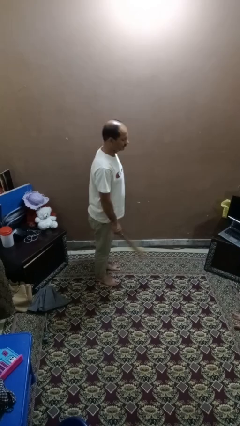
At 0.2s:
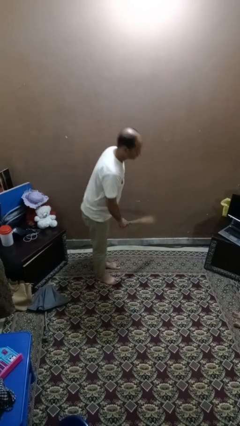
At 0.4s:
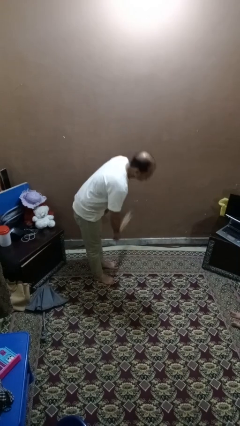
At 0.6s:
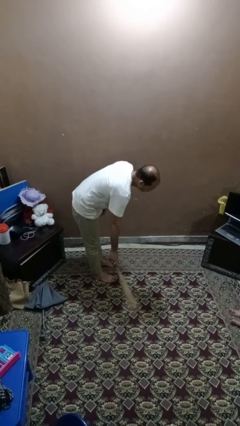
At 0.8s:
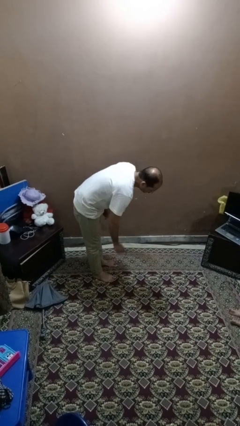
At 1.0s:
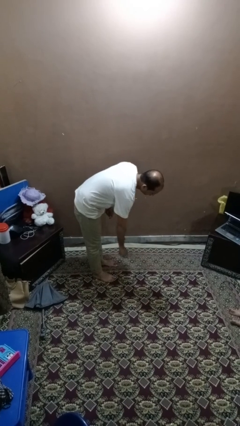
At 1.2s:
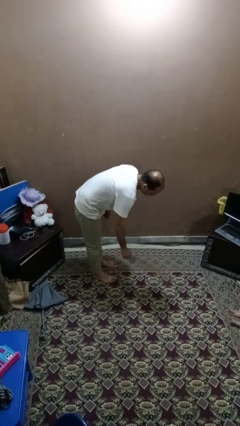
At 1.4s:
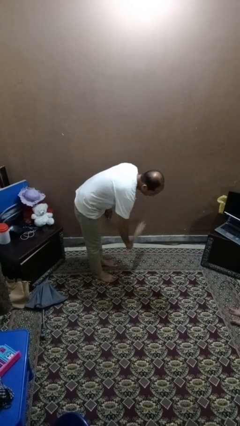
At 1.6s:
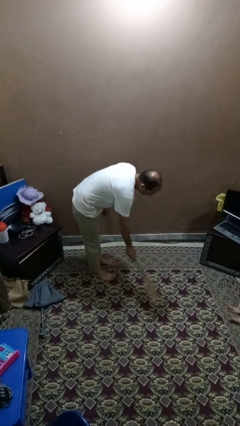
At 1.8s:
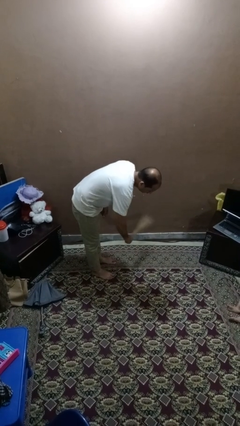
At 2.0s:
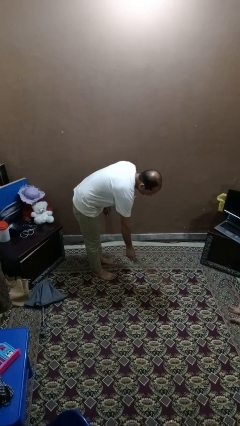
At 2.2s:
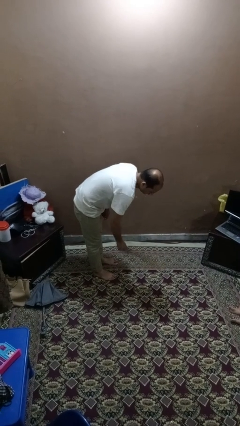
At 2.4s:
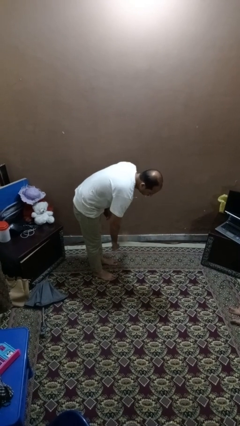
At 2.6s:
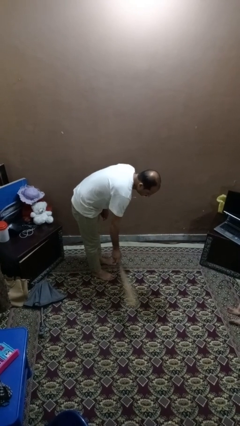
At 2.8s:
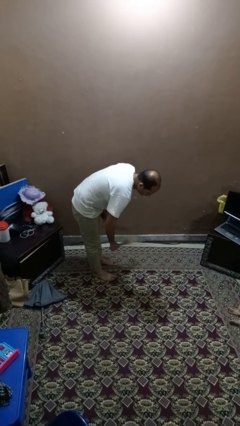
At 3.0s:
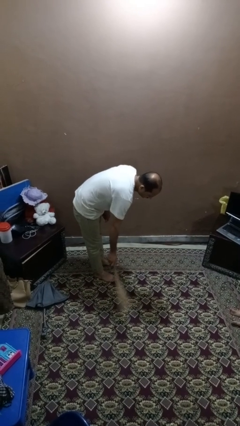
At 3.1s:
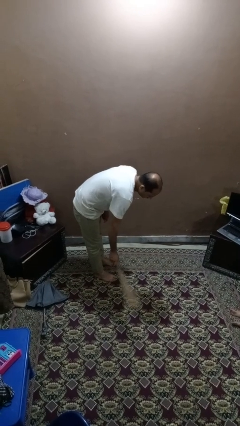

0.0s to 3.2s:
person sweeps floor

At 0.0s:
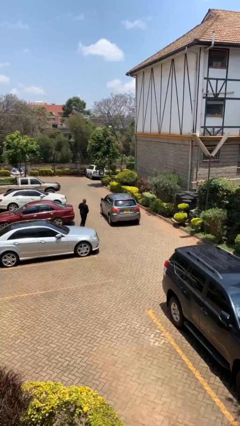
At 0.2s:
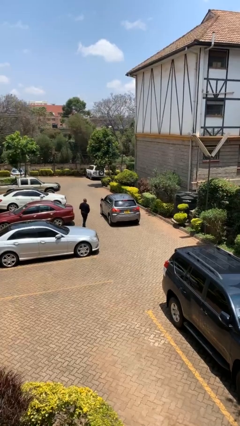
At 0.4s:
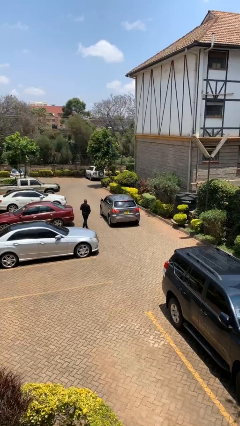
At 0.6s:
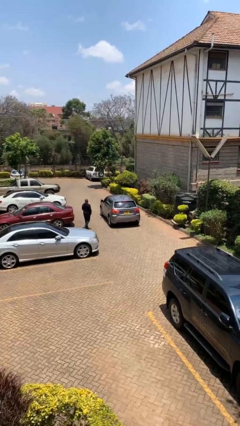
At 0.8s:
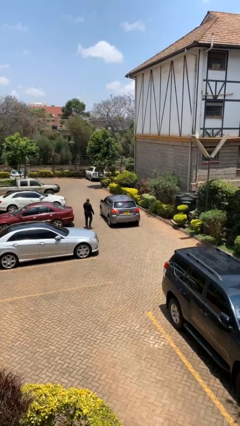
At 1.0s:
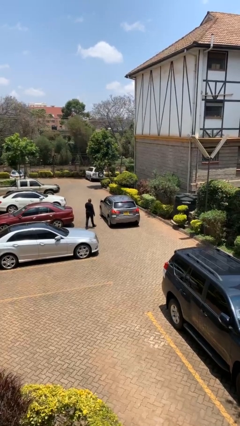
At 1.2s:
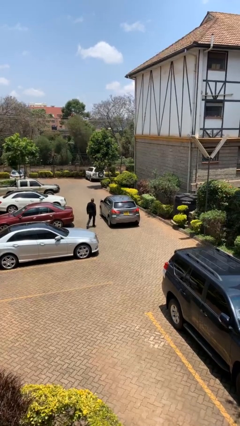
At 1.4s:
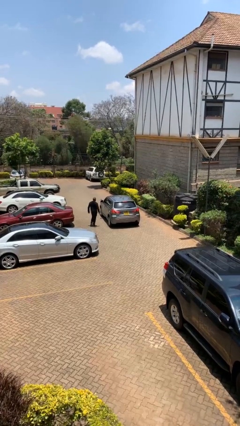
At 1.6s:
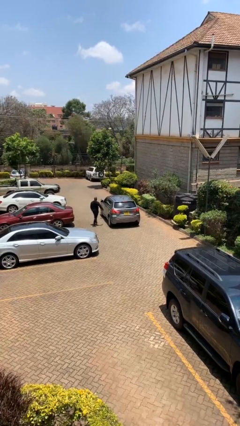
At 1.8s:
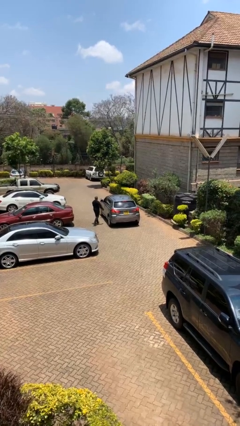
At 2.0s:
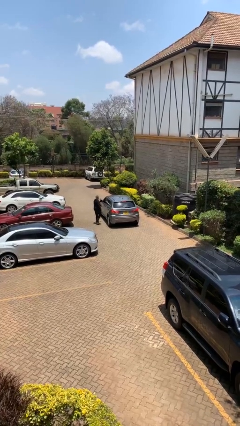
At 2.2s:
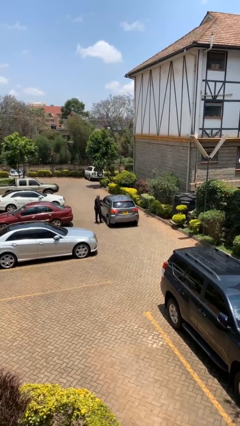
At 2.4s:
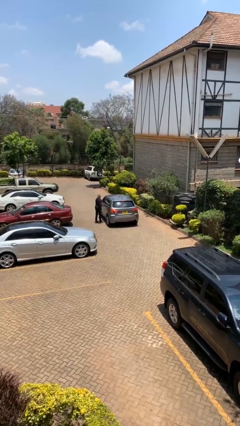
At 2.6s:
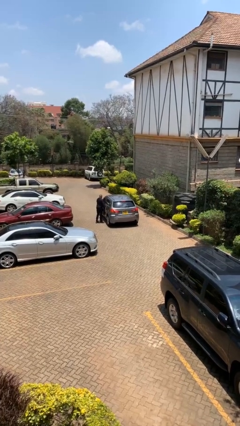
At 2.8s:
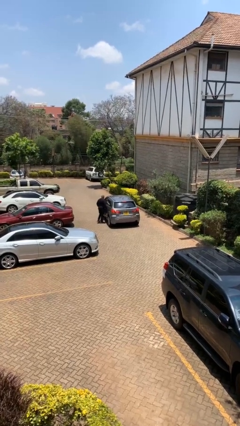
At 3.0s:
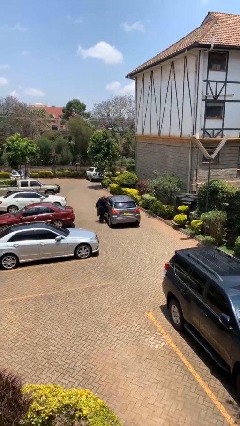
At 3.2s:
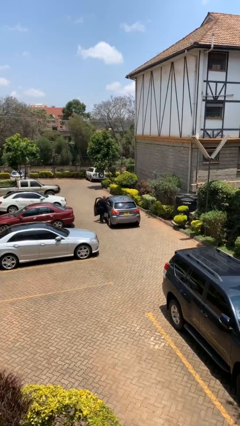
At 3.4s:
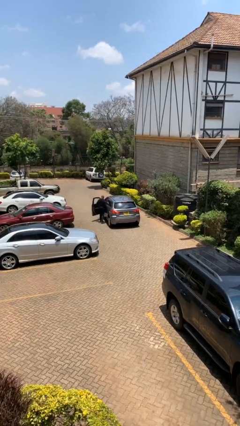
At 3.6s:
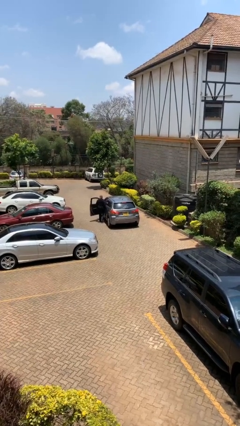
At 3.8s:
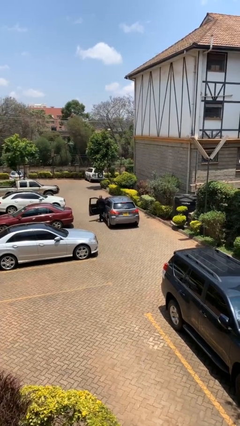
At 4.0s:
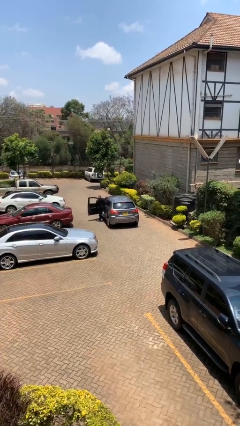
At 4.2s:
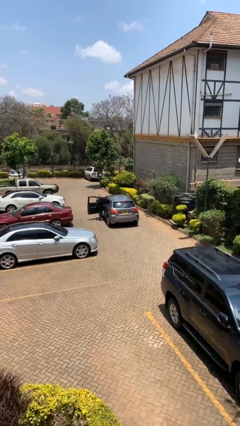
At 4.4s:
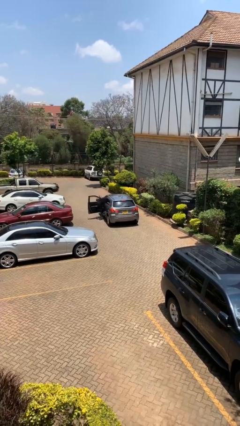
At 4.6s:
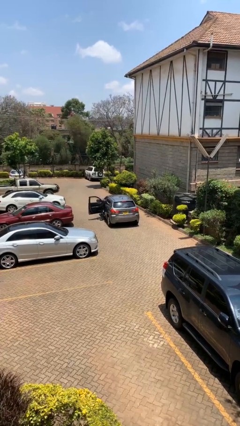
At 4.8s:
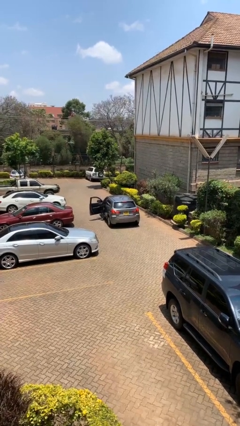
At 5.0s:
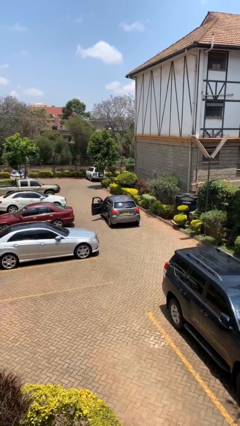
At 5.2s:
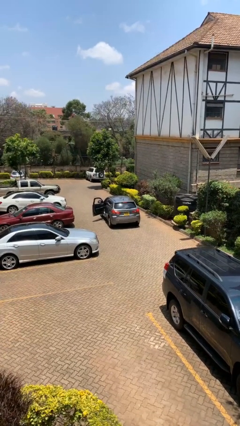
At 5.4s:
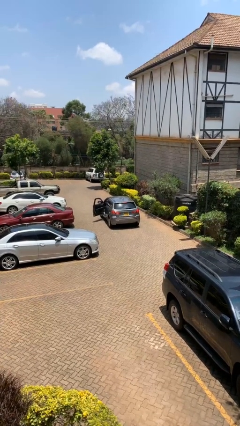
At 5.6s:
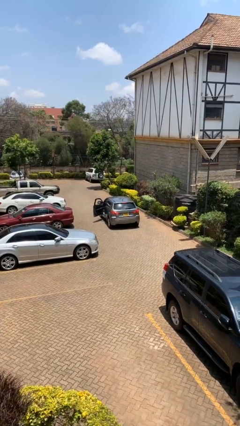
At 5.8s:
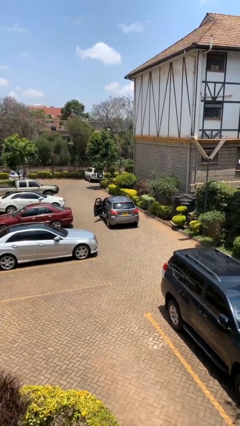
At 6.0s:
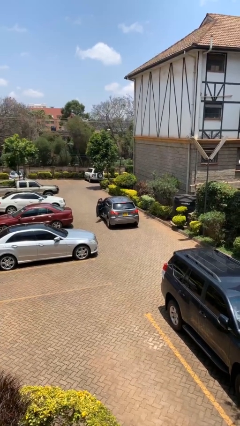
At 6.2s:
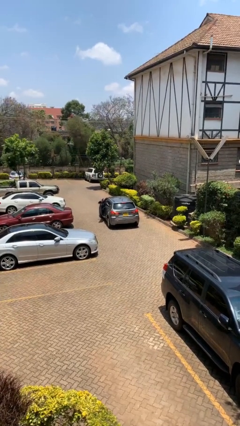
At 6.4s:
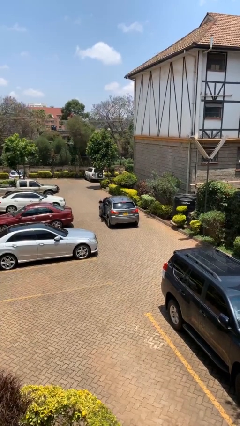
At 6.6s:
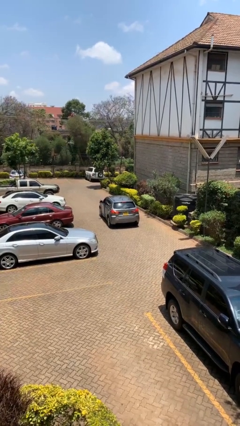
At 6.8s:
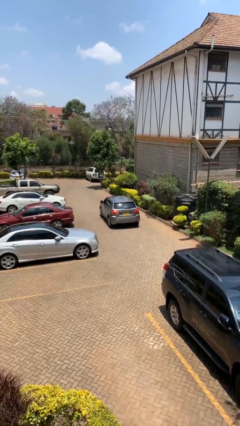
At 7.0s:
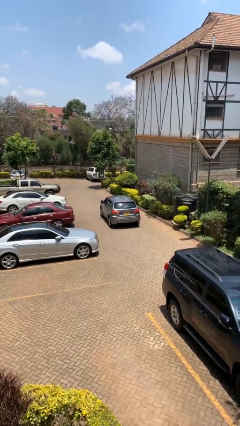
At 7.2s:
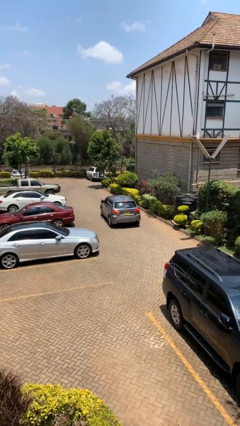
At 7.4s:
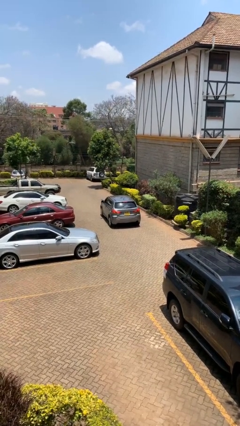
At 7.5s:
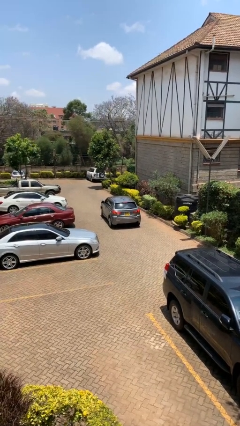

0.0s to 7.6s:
car picks up person

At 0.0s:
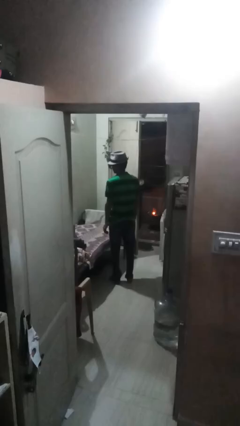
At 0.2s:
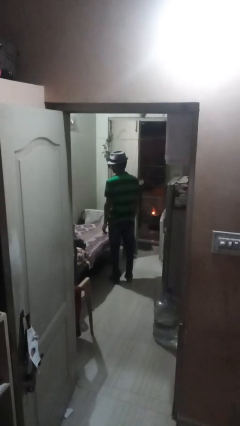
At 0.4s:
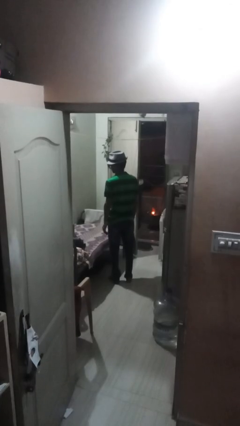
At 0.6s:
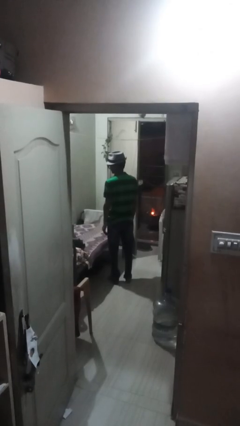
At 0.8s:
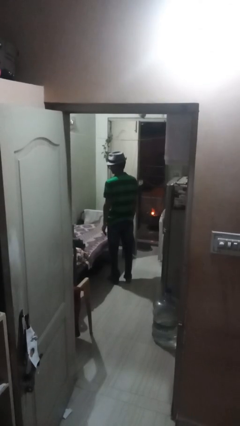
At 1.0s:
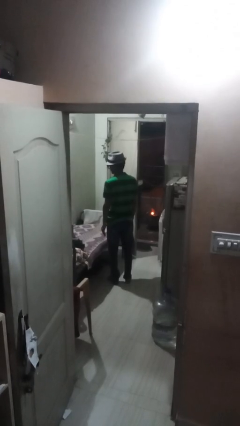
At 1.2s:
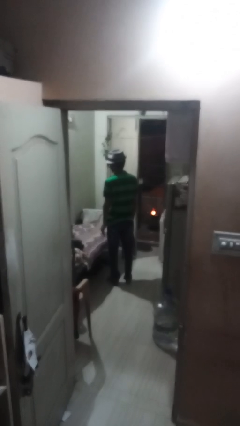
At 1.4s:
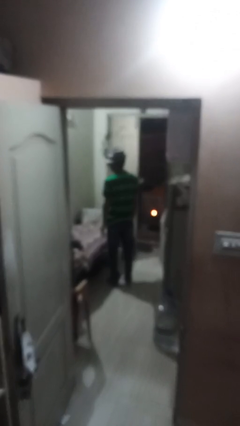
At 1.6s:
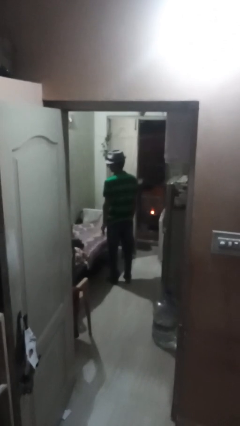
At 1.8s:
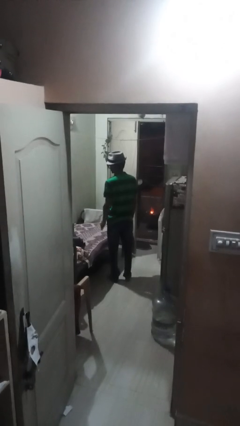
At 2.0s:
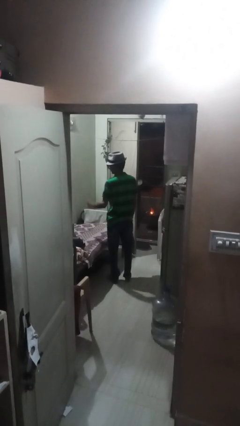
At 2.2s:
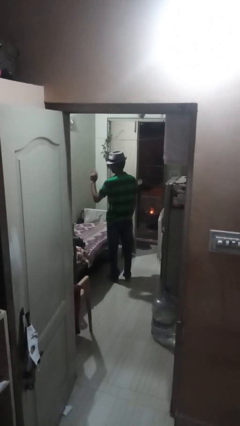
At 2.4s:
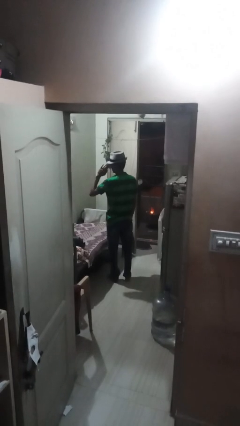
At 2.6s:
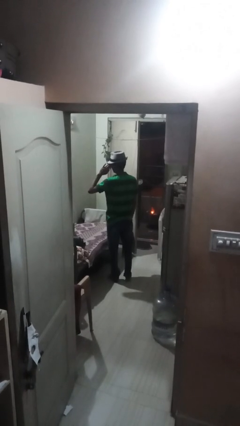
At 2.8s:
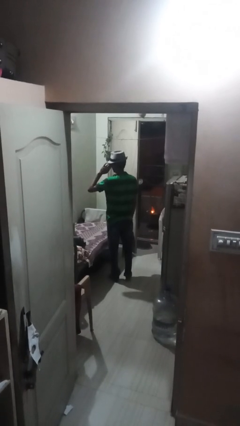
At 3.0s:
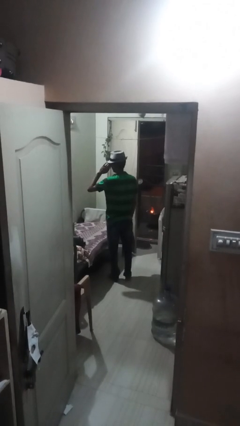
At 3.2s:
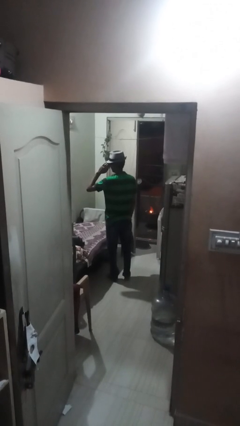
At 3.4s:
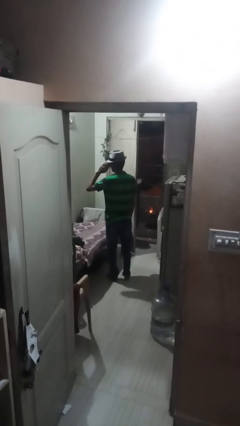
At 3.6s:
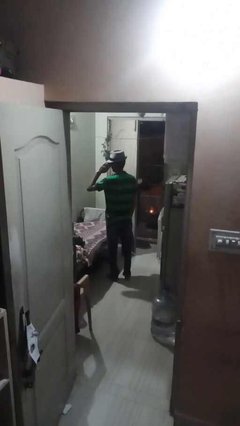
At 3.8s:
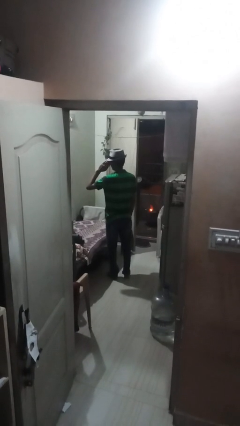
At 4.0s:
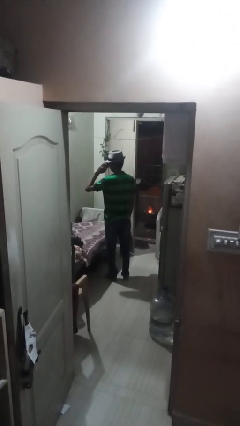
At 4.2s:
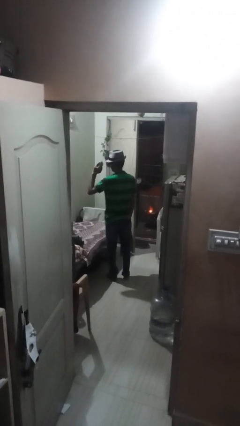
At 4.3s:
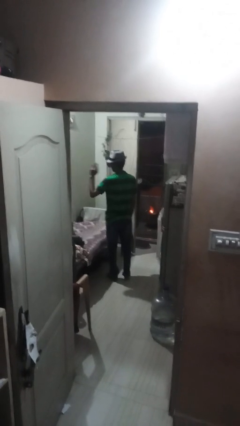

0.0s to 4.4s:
person salutes

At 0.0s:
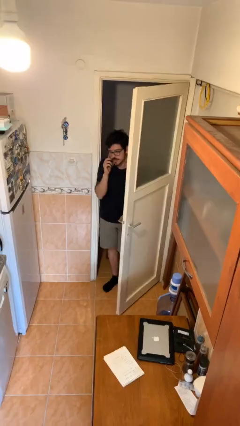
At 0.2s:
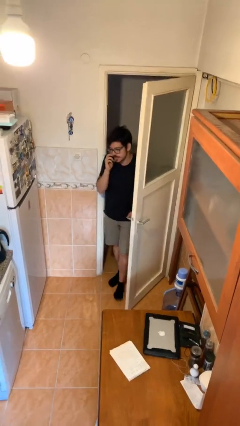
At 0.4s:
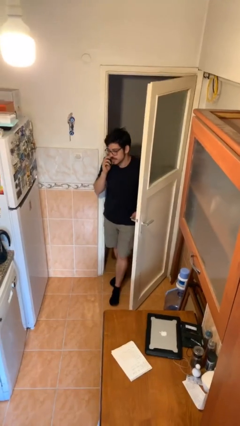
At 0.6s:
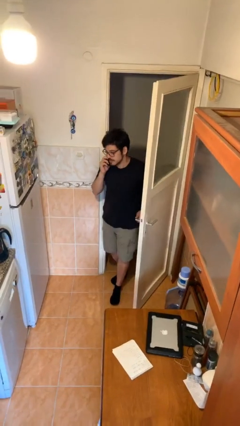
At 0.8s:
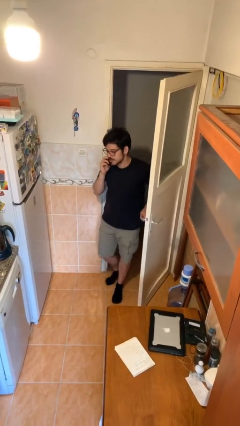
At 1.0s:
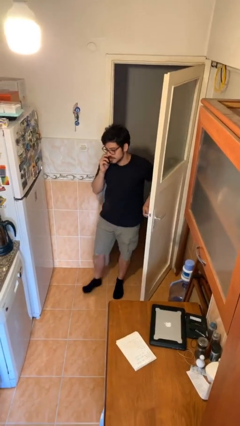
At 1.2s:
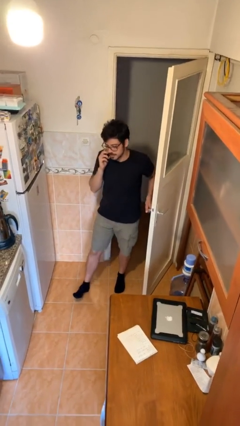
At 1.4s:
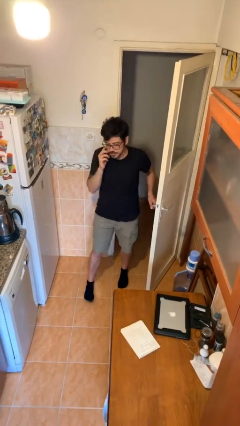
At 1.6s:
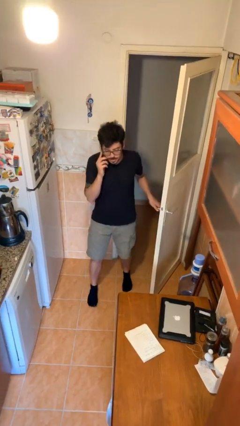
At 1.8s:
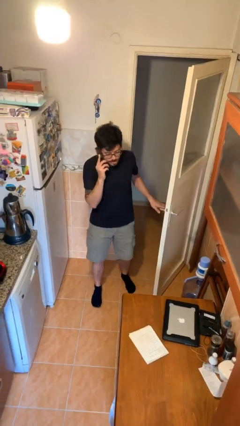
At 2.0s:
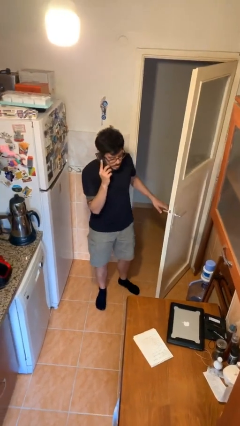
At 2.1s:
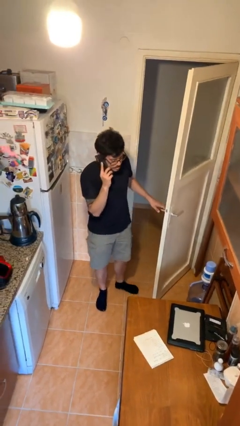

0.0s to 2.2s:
person enters scene through structure

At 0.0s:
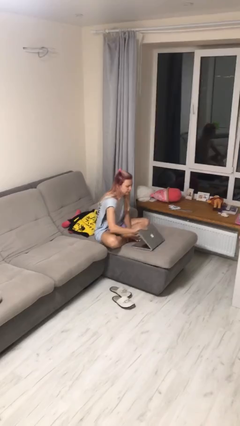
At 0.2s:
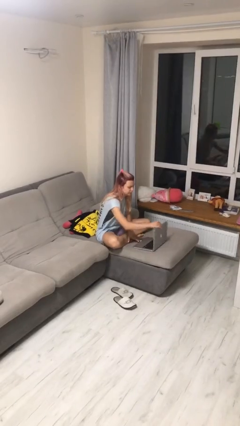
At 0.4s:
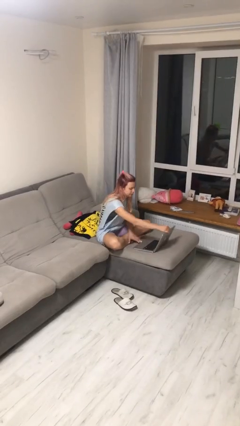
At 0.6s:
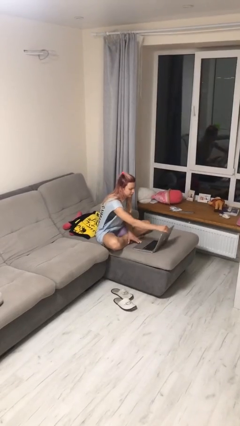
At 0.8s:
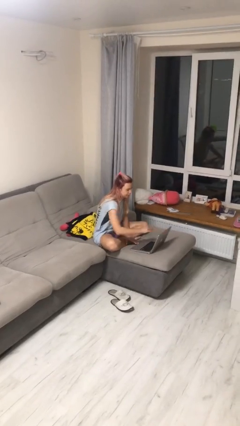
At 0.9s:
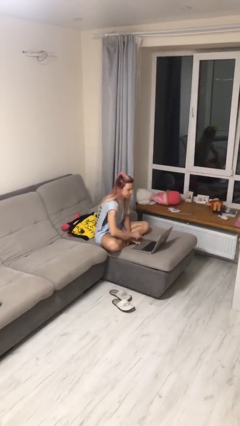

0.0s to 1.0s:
person opens laptop
